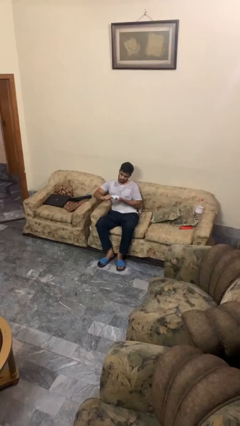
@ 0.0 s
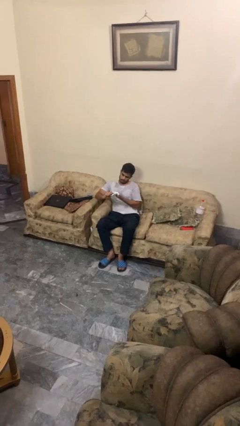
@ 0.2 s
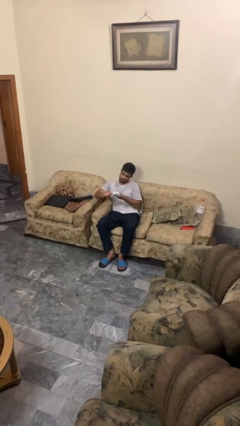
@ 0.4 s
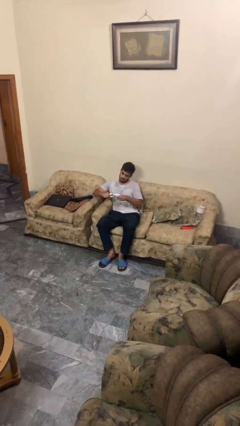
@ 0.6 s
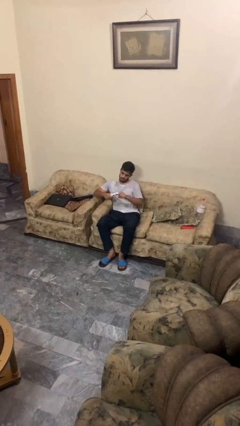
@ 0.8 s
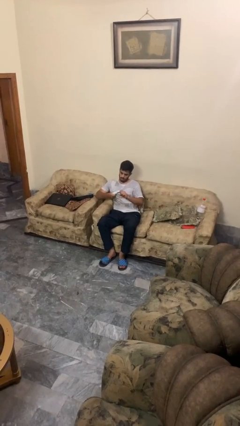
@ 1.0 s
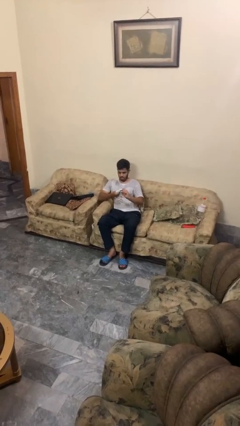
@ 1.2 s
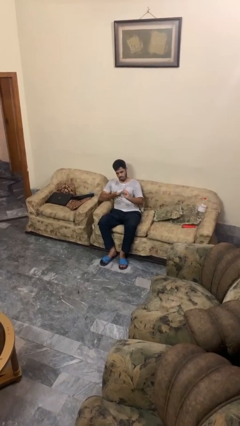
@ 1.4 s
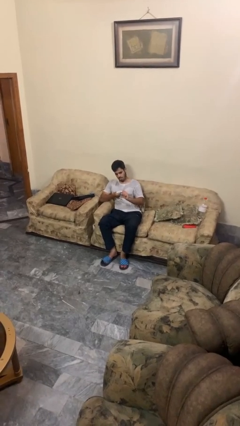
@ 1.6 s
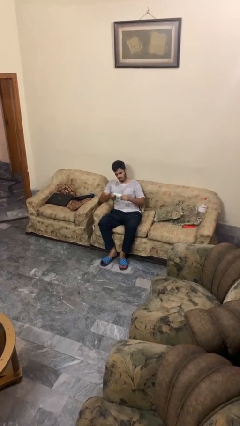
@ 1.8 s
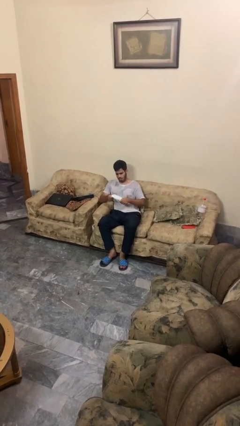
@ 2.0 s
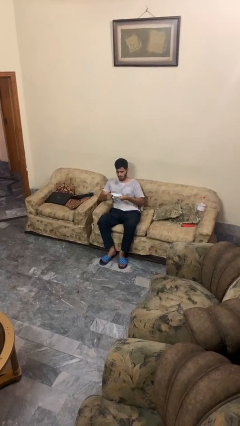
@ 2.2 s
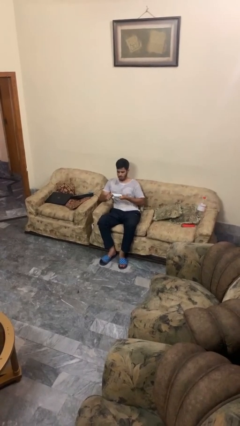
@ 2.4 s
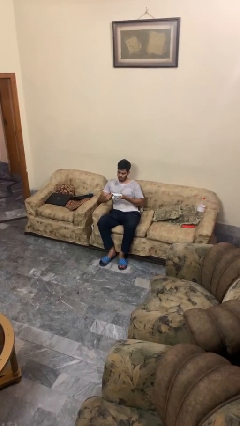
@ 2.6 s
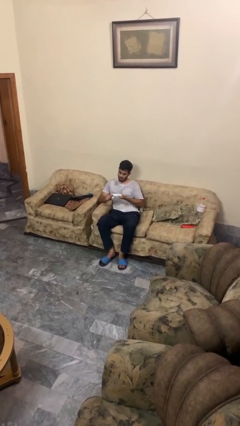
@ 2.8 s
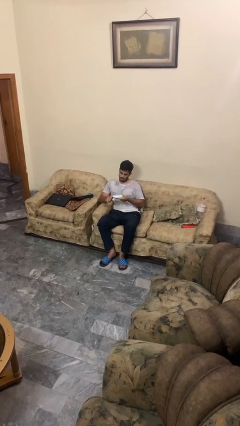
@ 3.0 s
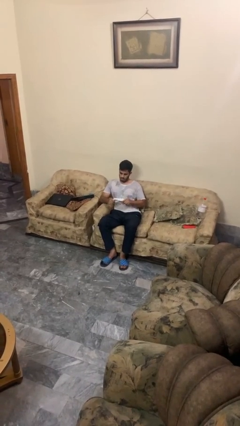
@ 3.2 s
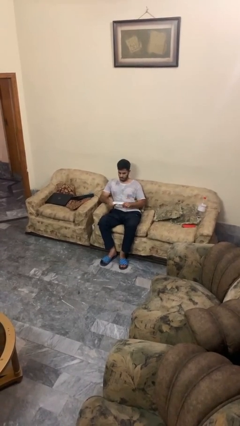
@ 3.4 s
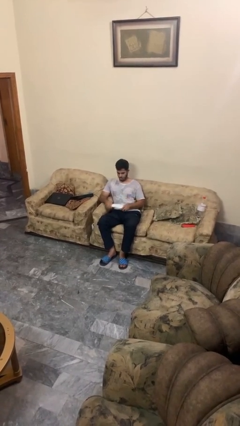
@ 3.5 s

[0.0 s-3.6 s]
person squeezes object

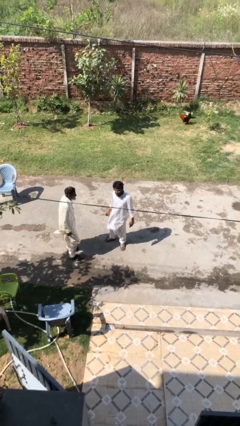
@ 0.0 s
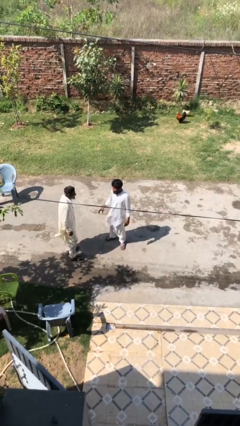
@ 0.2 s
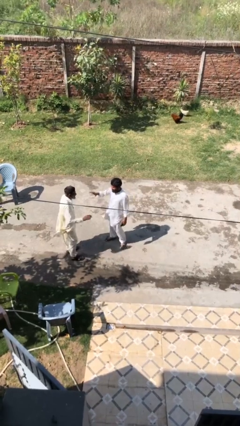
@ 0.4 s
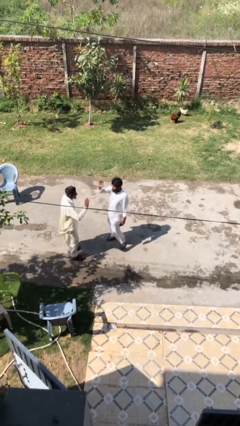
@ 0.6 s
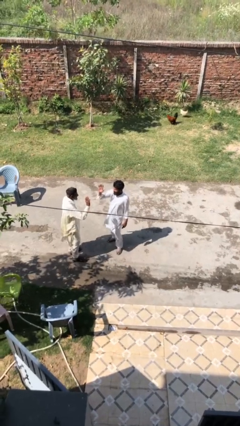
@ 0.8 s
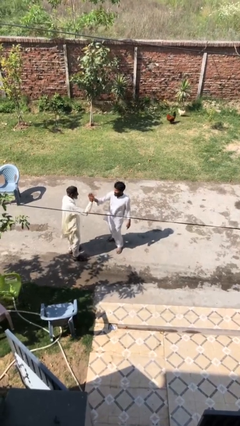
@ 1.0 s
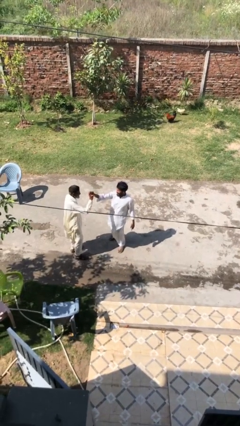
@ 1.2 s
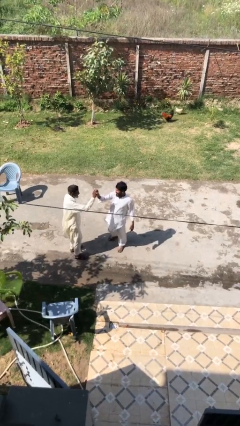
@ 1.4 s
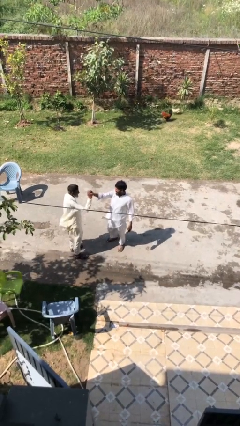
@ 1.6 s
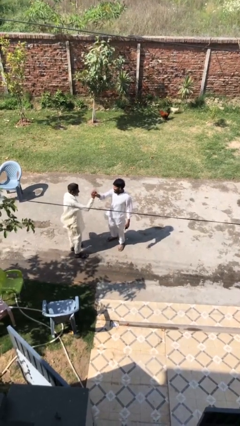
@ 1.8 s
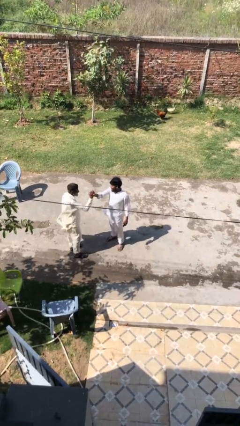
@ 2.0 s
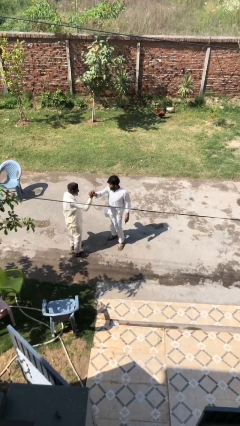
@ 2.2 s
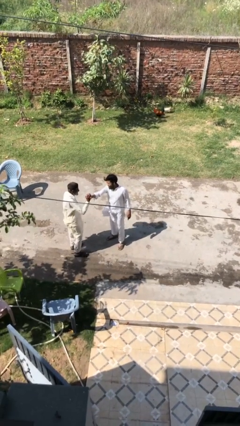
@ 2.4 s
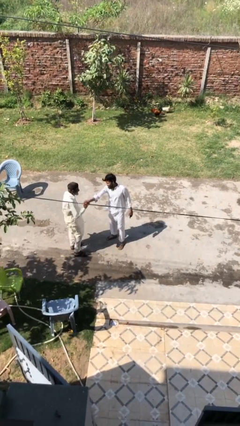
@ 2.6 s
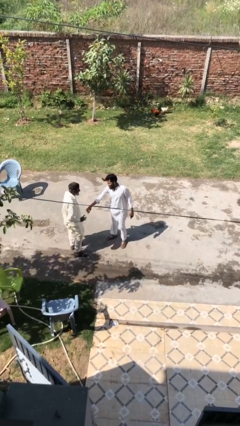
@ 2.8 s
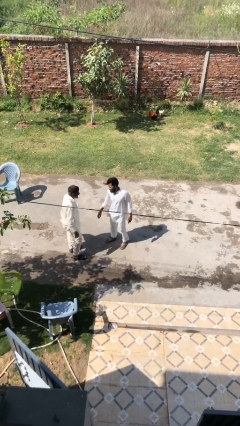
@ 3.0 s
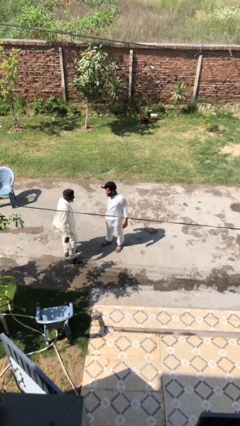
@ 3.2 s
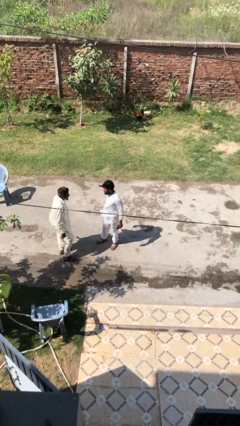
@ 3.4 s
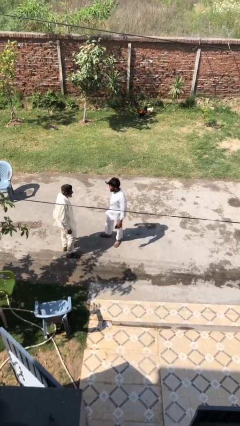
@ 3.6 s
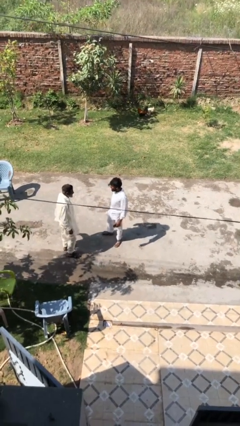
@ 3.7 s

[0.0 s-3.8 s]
person highfives hand

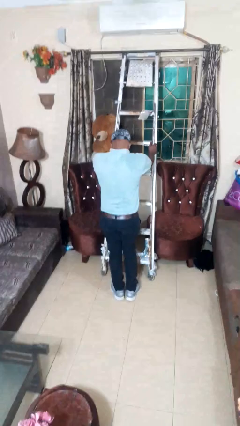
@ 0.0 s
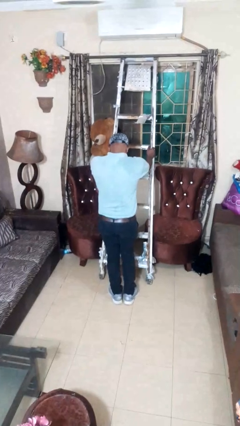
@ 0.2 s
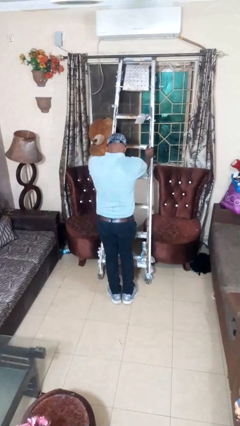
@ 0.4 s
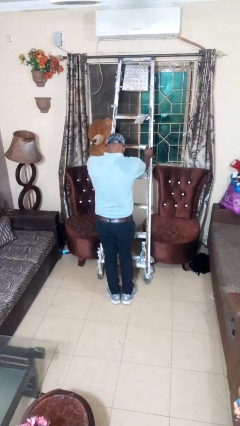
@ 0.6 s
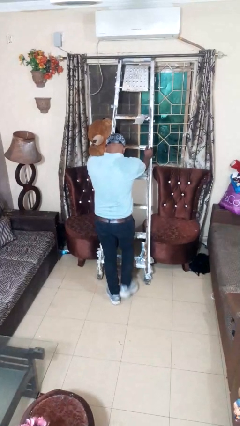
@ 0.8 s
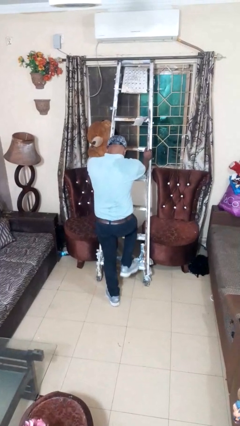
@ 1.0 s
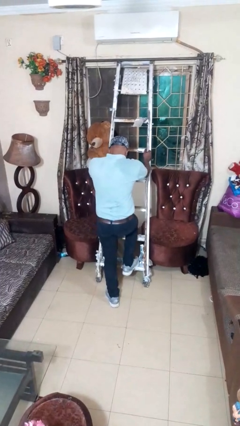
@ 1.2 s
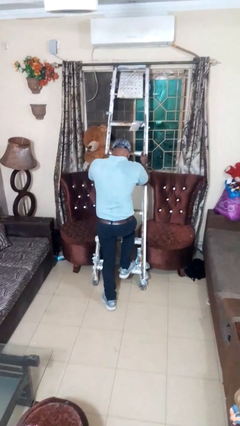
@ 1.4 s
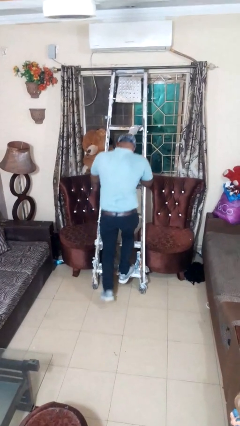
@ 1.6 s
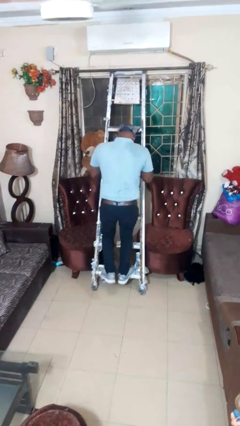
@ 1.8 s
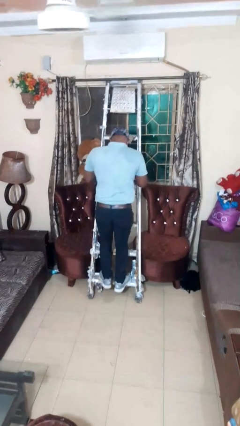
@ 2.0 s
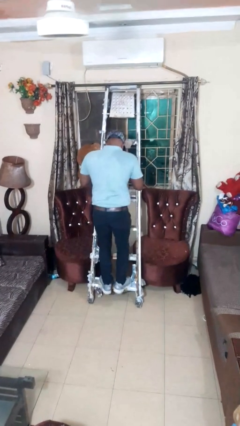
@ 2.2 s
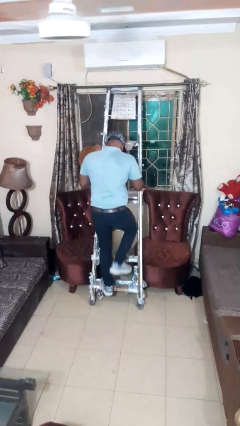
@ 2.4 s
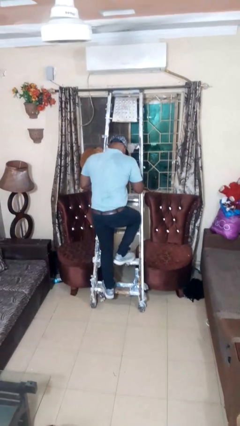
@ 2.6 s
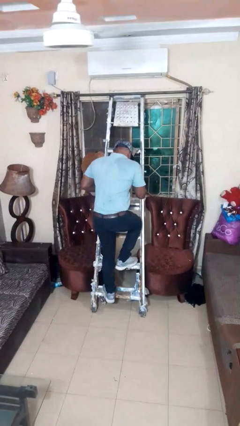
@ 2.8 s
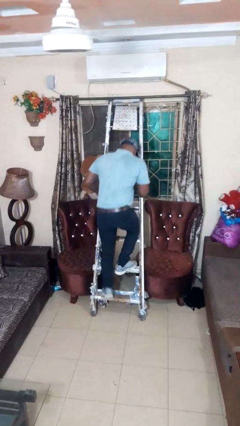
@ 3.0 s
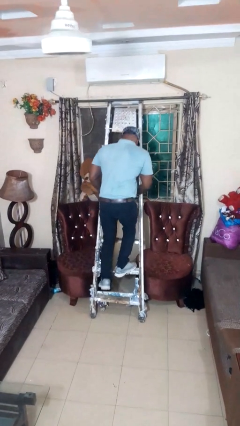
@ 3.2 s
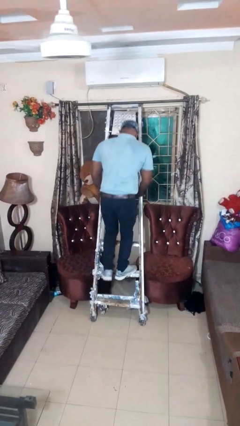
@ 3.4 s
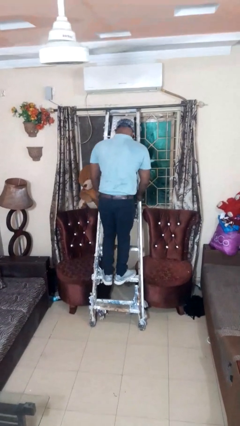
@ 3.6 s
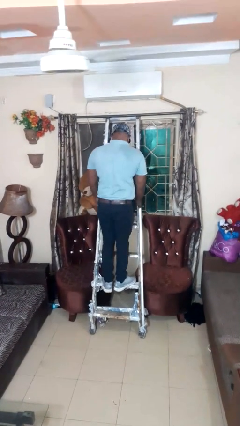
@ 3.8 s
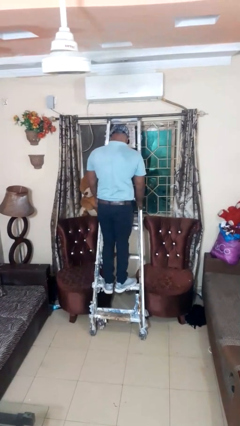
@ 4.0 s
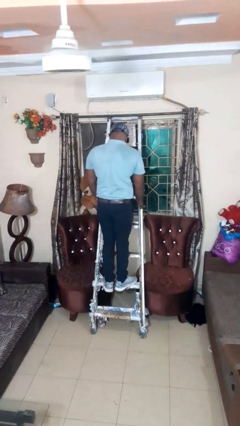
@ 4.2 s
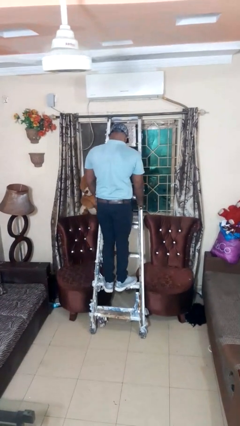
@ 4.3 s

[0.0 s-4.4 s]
person climbs up ladder

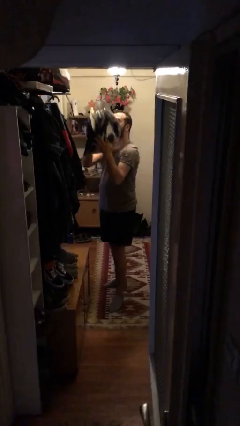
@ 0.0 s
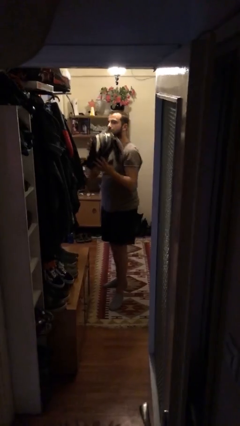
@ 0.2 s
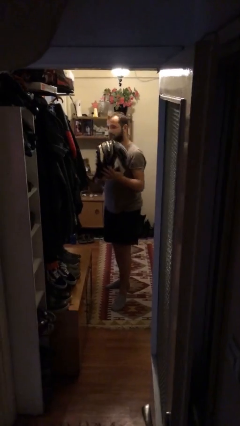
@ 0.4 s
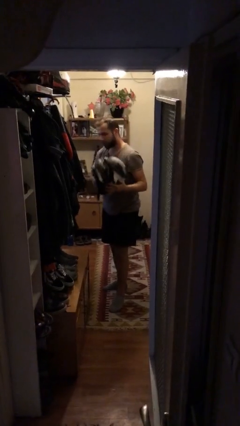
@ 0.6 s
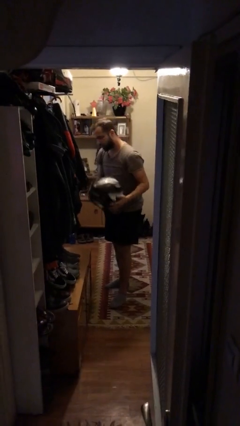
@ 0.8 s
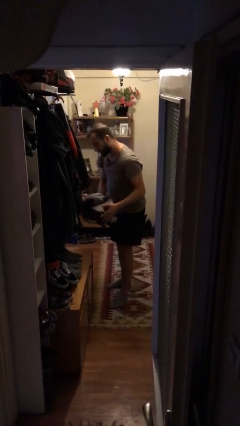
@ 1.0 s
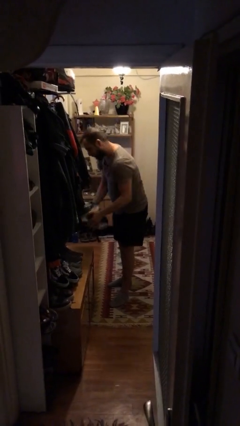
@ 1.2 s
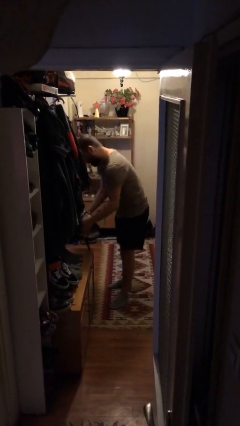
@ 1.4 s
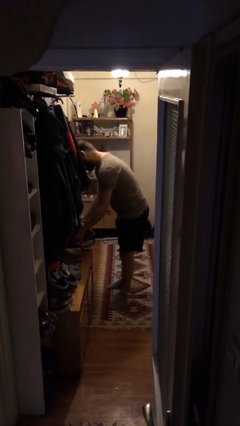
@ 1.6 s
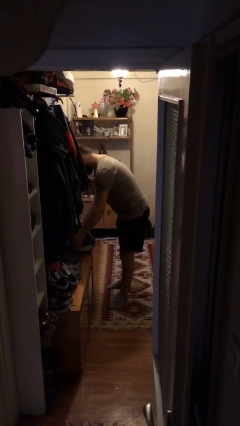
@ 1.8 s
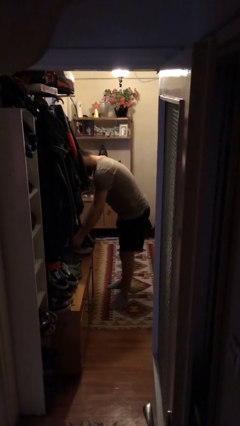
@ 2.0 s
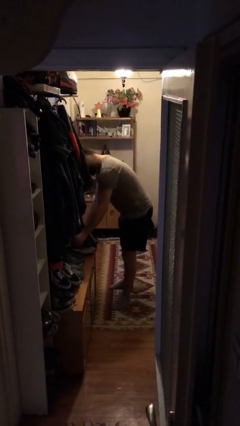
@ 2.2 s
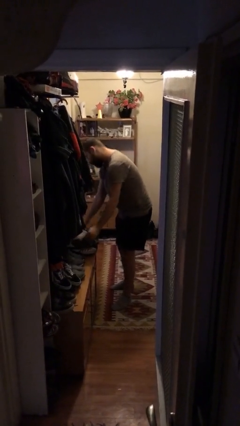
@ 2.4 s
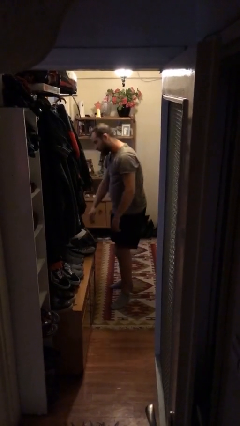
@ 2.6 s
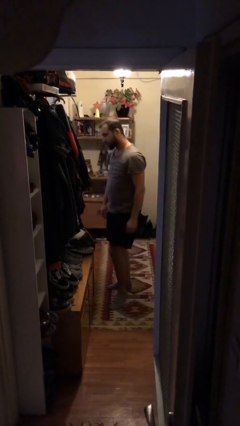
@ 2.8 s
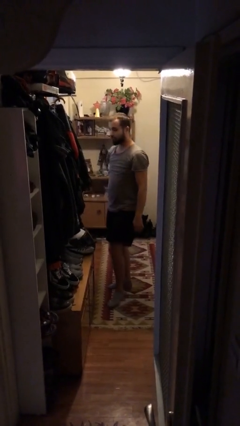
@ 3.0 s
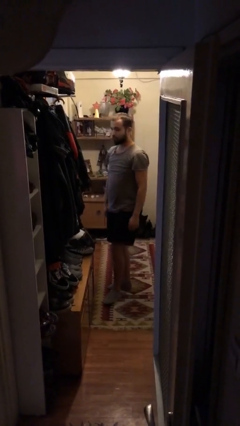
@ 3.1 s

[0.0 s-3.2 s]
person puts down object on table

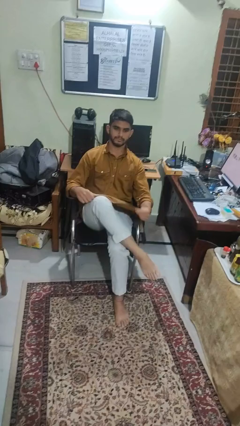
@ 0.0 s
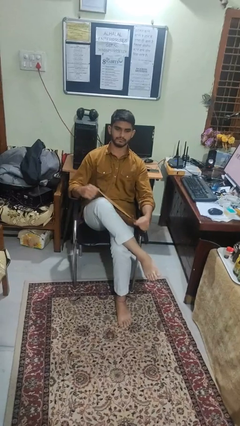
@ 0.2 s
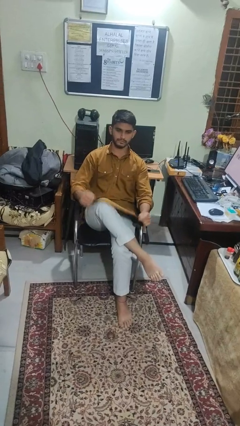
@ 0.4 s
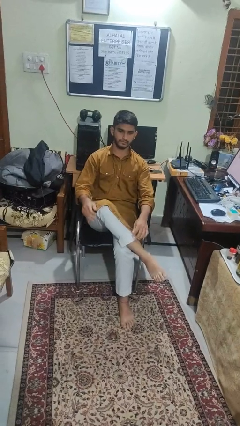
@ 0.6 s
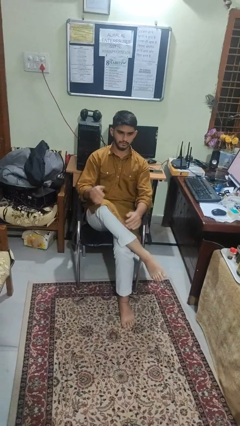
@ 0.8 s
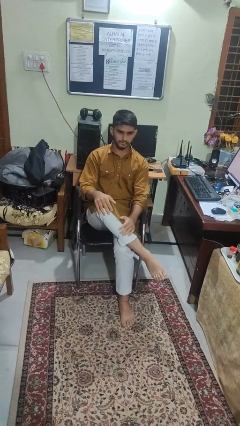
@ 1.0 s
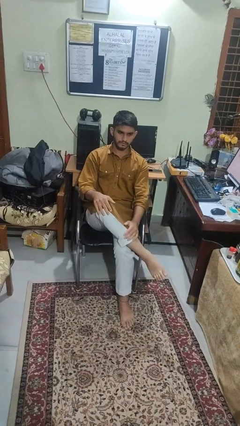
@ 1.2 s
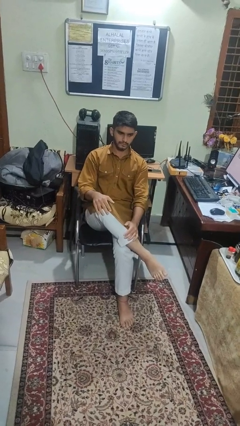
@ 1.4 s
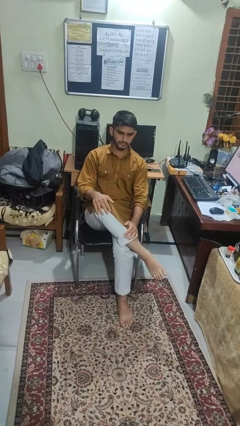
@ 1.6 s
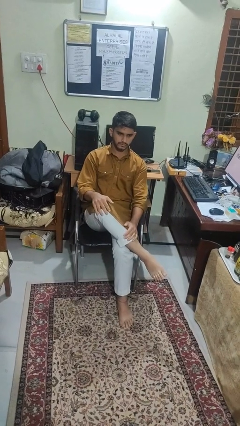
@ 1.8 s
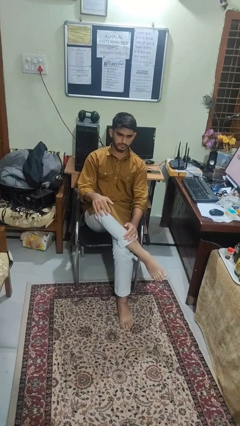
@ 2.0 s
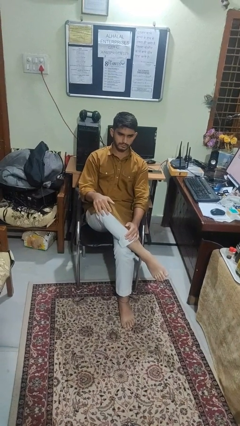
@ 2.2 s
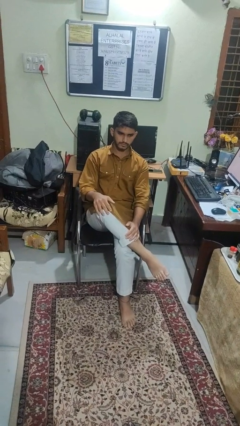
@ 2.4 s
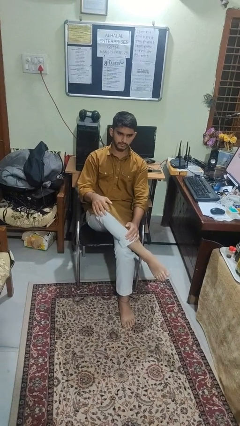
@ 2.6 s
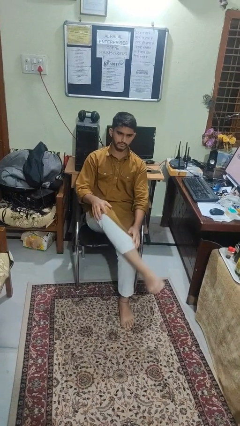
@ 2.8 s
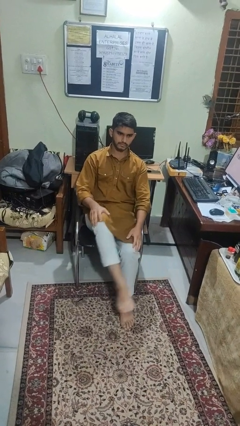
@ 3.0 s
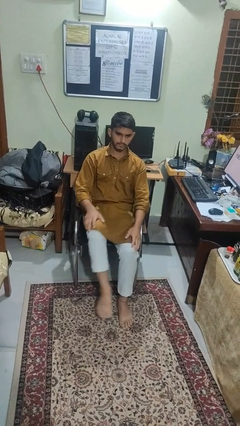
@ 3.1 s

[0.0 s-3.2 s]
person crosses legs
